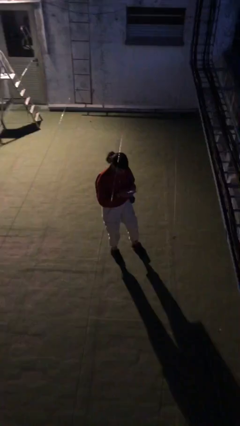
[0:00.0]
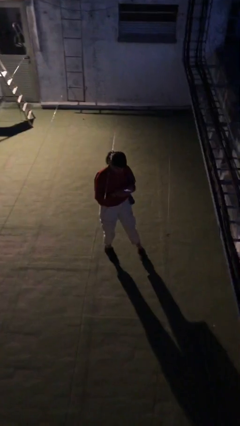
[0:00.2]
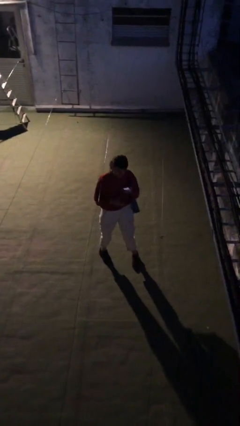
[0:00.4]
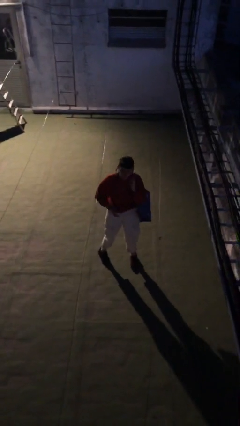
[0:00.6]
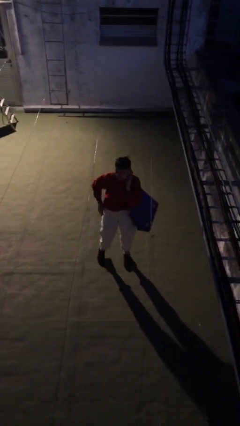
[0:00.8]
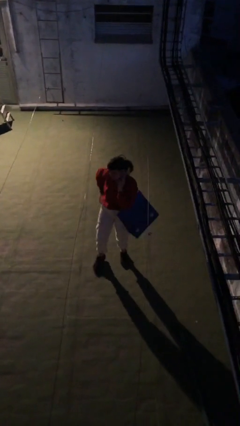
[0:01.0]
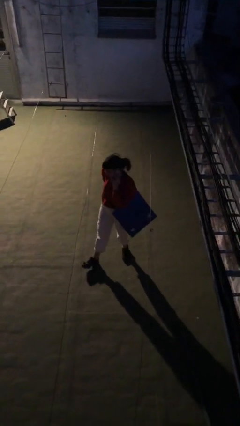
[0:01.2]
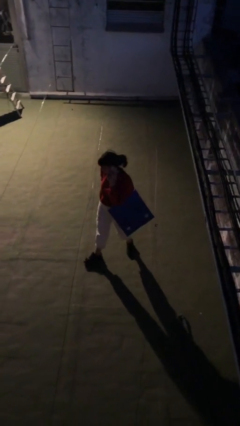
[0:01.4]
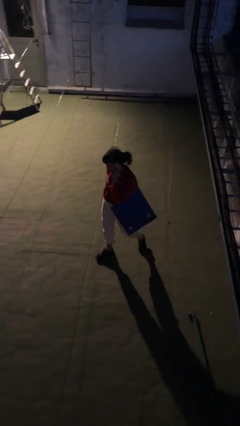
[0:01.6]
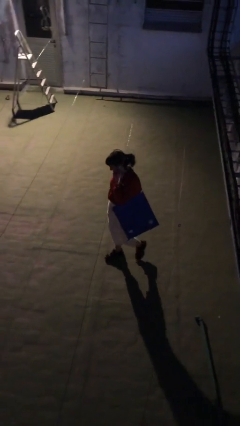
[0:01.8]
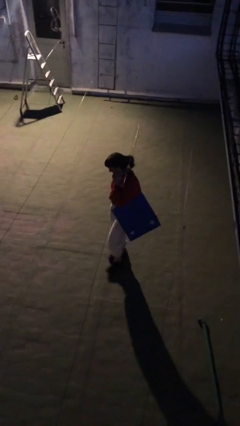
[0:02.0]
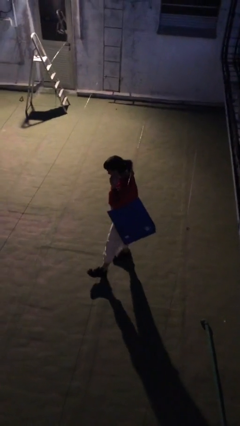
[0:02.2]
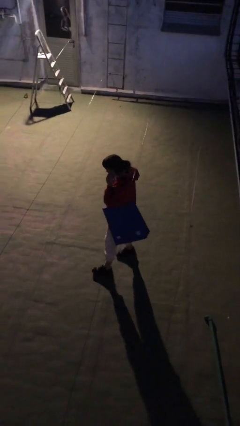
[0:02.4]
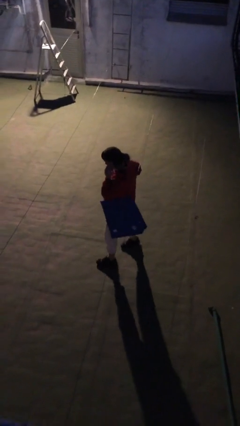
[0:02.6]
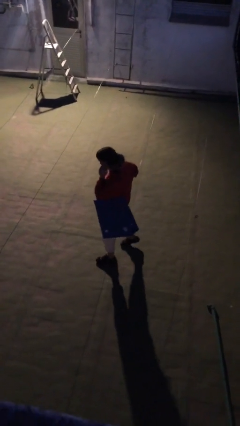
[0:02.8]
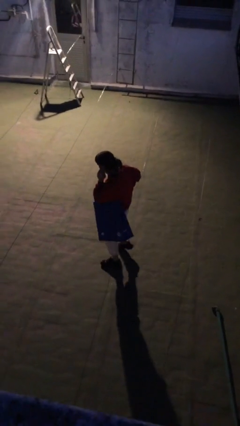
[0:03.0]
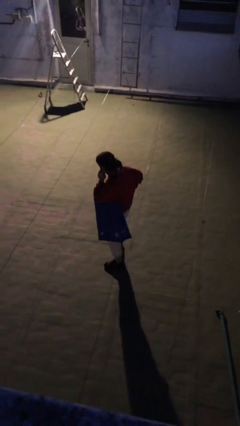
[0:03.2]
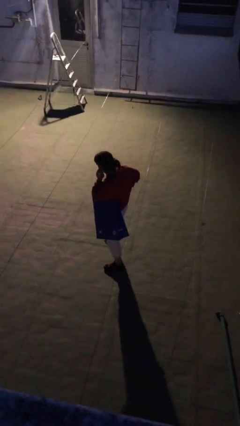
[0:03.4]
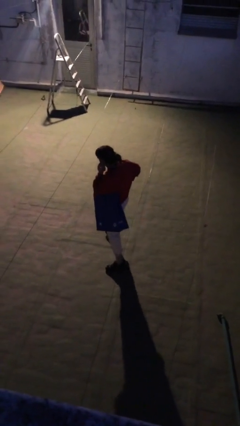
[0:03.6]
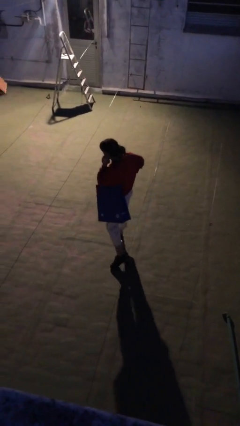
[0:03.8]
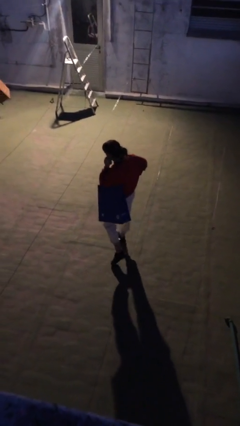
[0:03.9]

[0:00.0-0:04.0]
person talks on phone

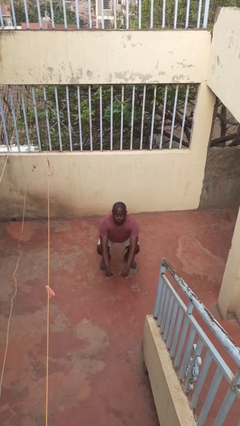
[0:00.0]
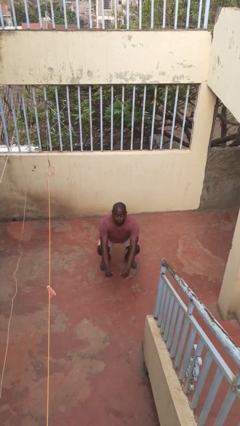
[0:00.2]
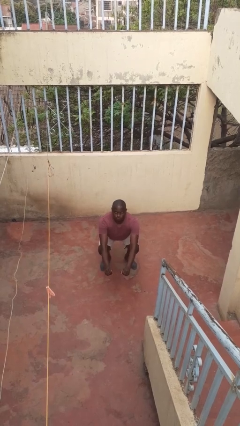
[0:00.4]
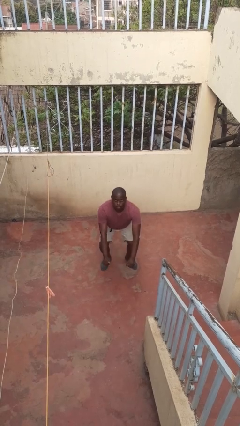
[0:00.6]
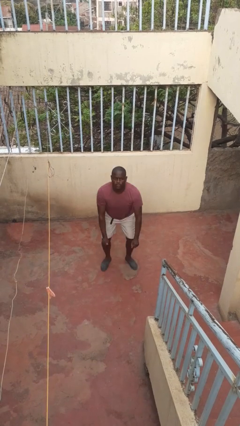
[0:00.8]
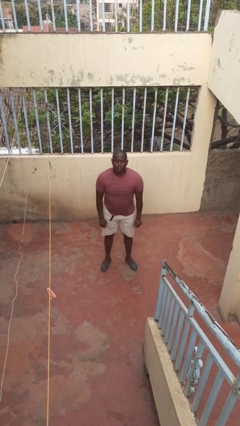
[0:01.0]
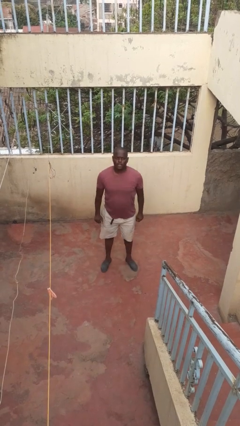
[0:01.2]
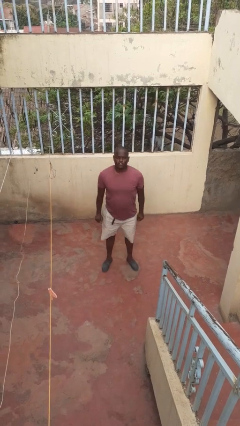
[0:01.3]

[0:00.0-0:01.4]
person stands up

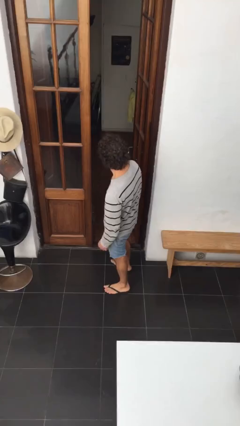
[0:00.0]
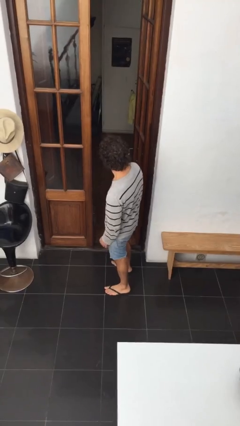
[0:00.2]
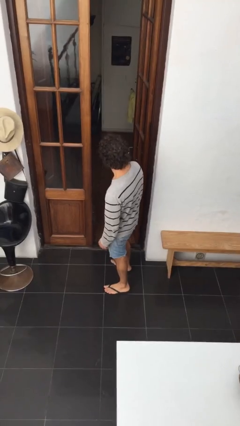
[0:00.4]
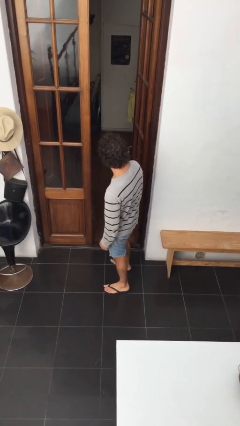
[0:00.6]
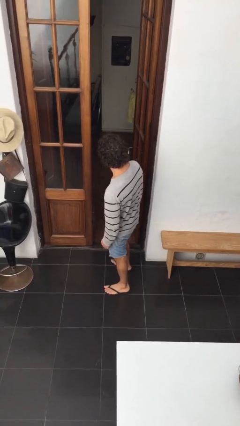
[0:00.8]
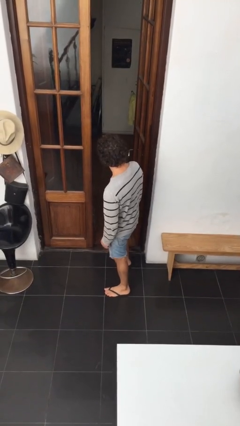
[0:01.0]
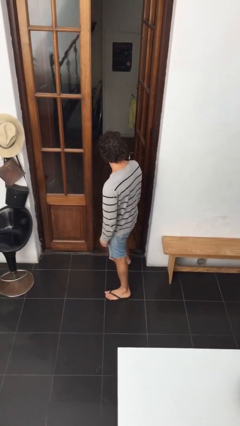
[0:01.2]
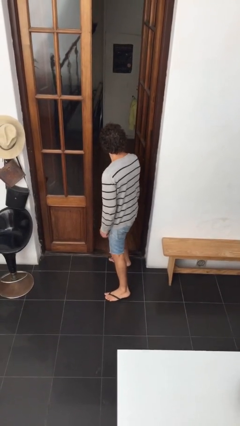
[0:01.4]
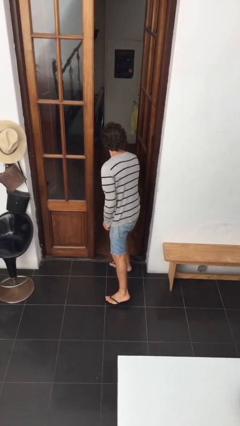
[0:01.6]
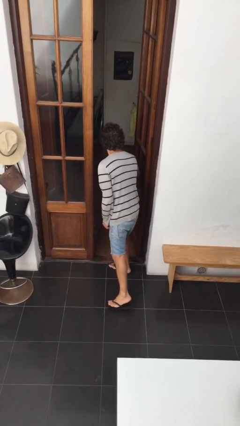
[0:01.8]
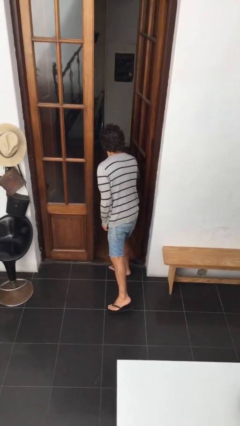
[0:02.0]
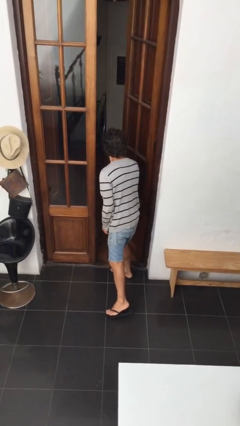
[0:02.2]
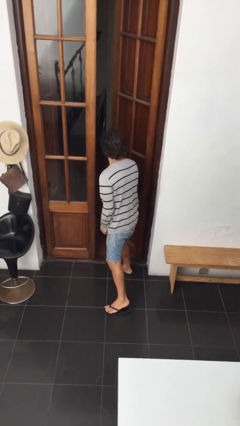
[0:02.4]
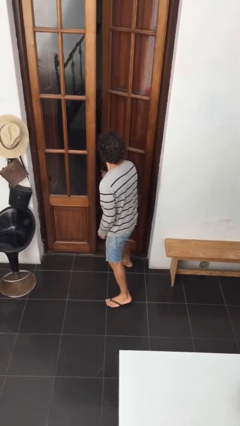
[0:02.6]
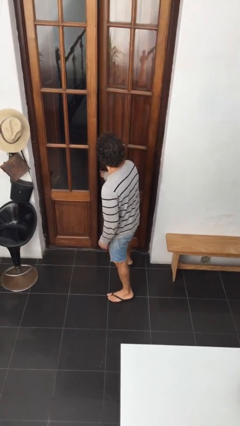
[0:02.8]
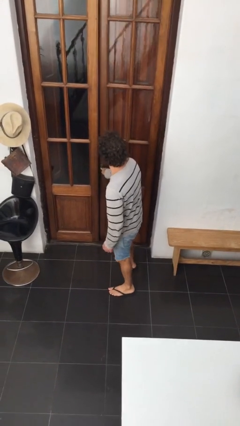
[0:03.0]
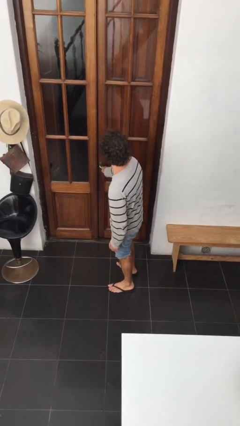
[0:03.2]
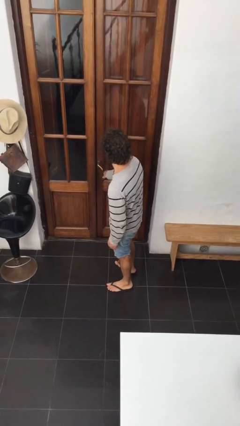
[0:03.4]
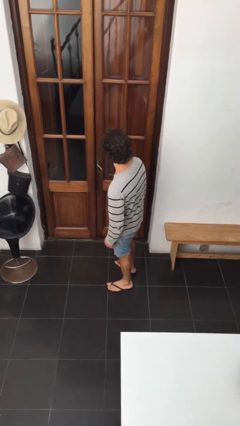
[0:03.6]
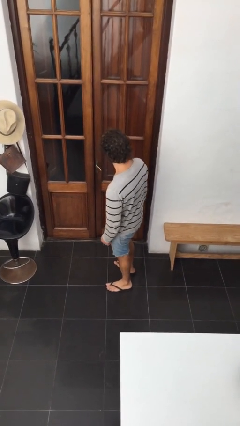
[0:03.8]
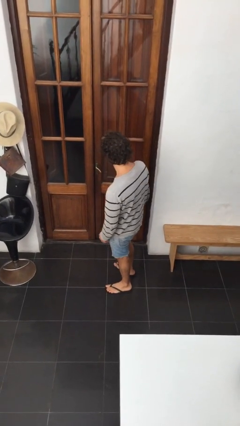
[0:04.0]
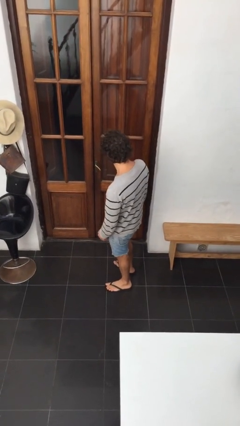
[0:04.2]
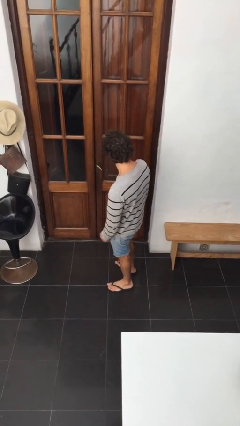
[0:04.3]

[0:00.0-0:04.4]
person closes facility door

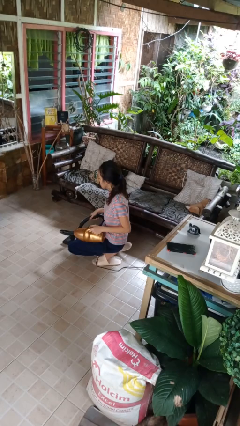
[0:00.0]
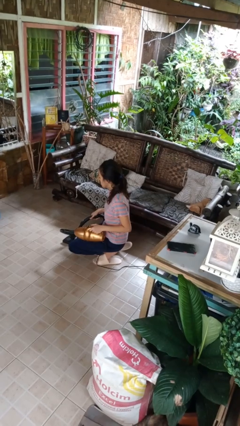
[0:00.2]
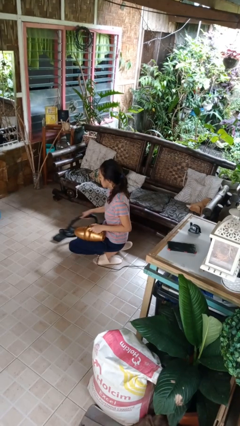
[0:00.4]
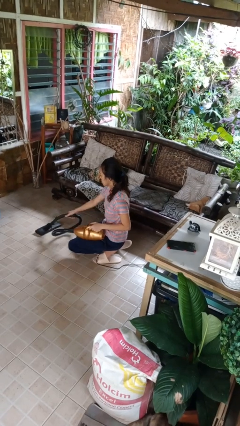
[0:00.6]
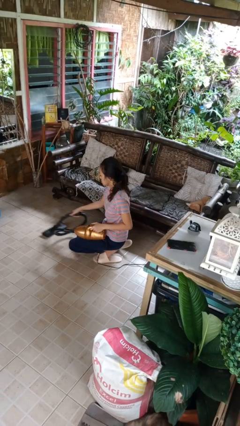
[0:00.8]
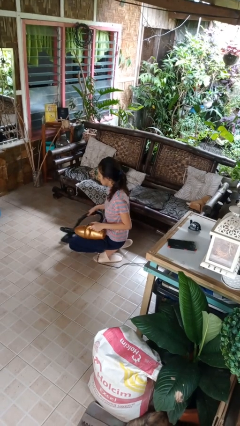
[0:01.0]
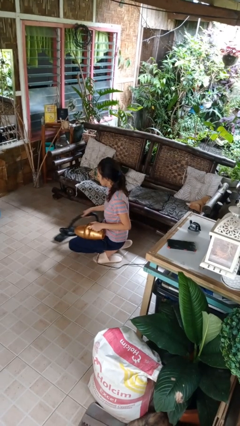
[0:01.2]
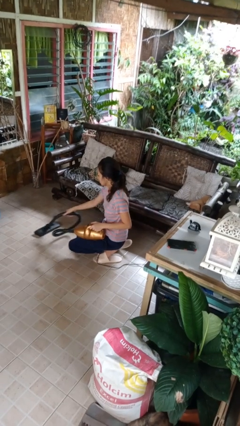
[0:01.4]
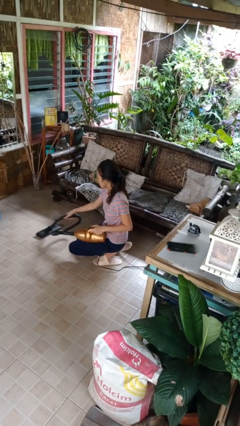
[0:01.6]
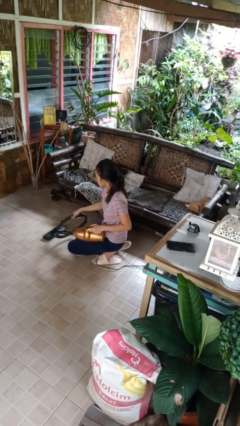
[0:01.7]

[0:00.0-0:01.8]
person vacuums carpet

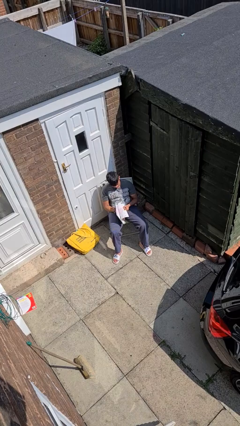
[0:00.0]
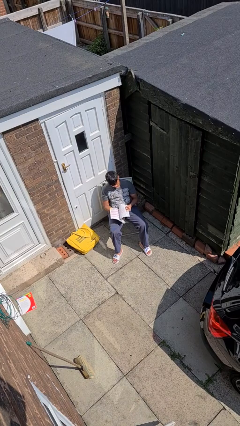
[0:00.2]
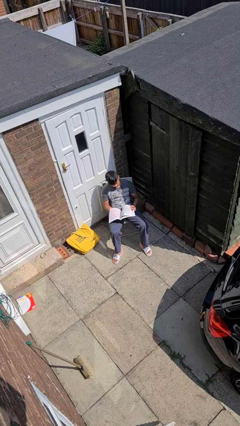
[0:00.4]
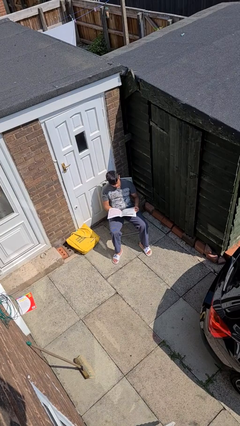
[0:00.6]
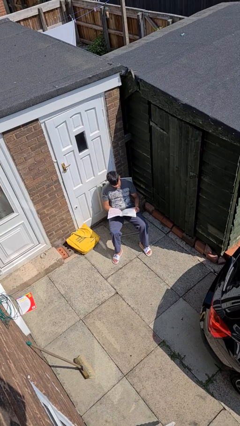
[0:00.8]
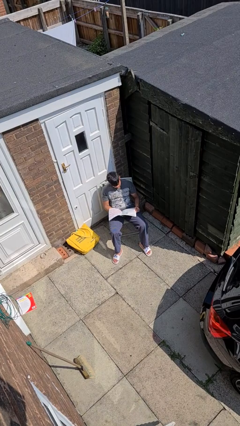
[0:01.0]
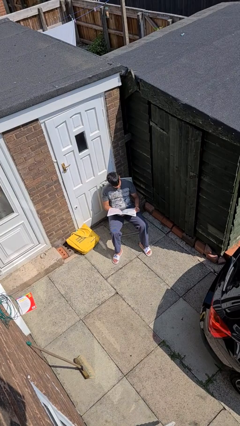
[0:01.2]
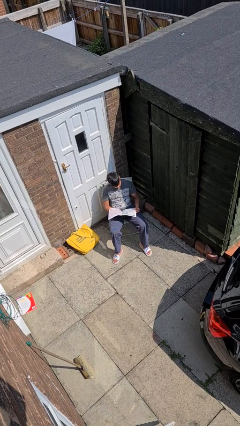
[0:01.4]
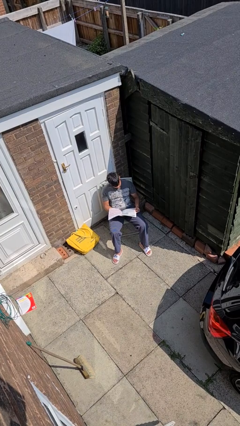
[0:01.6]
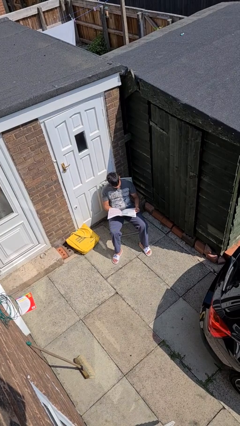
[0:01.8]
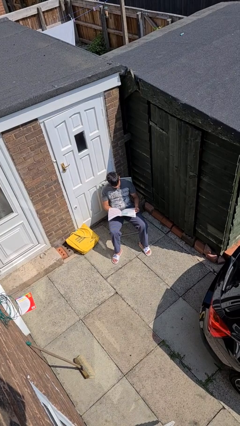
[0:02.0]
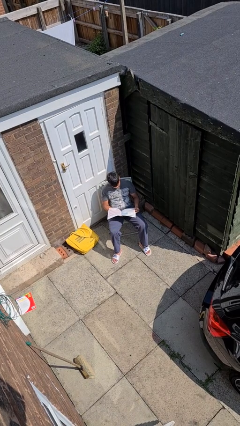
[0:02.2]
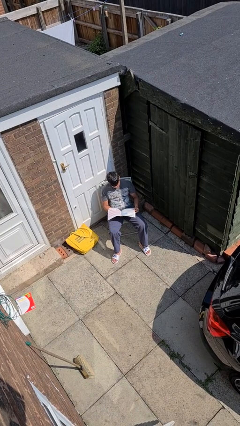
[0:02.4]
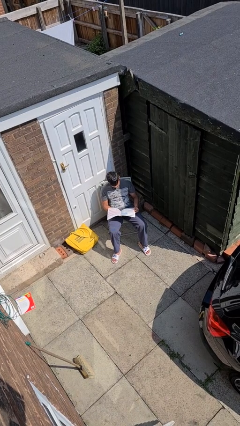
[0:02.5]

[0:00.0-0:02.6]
person reads newspaper

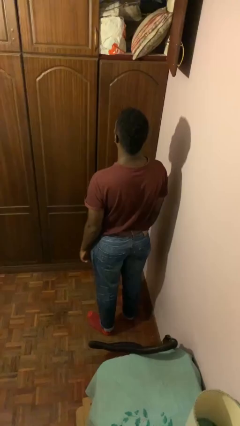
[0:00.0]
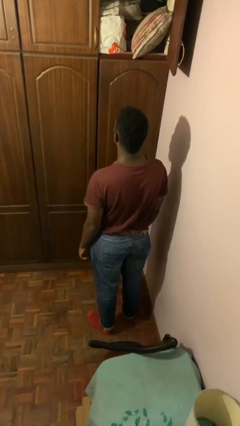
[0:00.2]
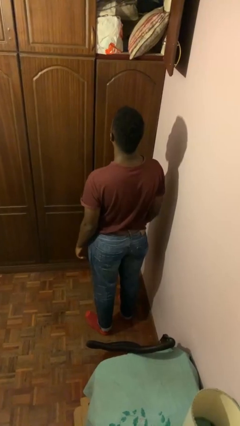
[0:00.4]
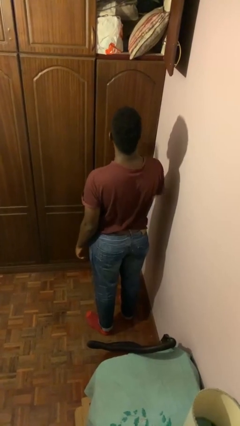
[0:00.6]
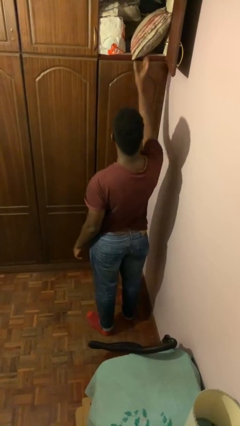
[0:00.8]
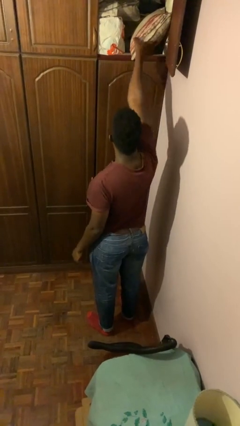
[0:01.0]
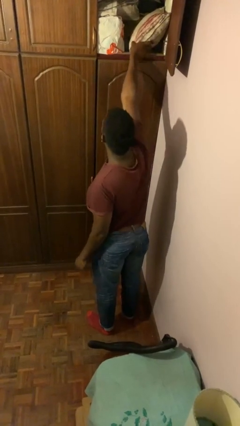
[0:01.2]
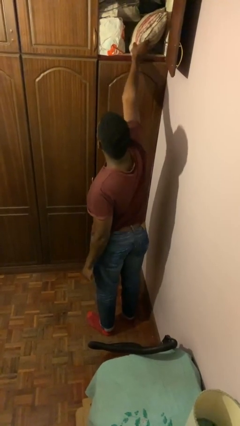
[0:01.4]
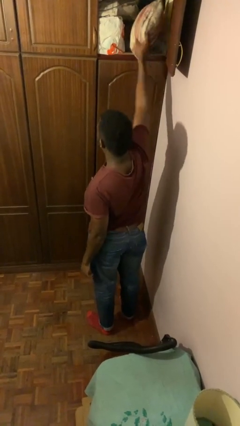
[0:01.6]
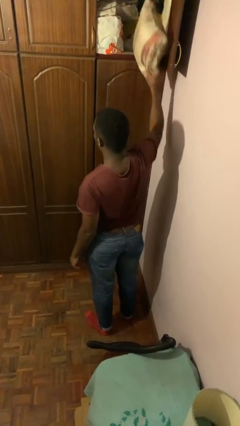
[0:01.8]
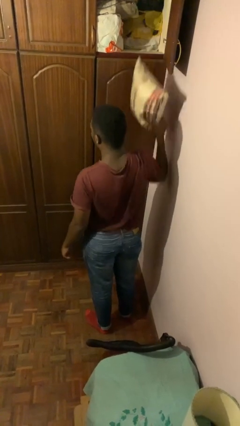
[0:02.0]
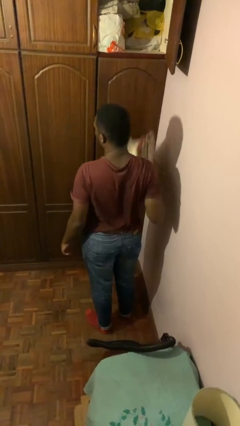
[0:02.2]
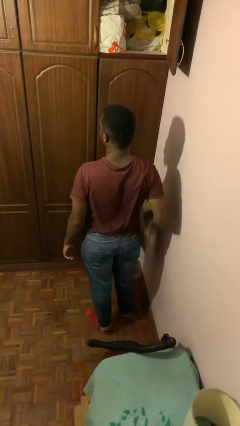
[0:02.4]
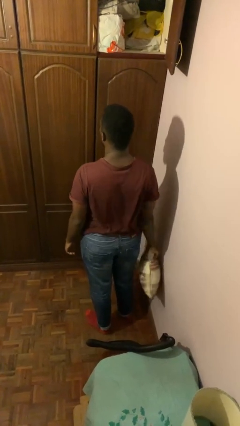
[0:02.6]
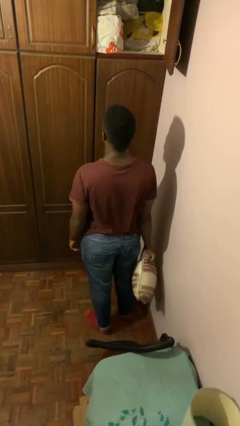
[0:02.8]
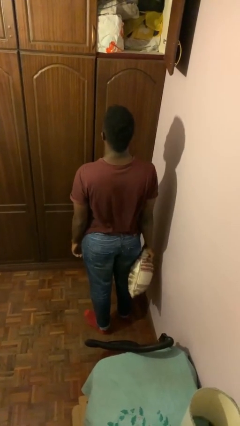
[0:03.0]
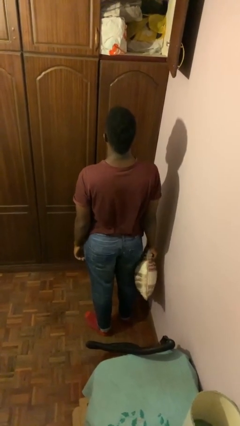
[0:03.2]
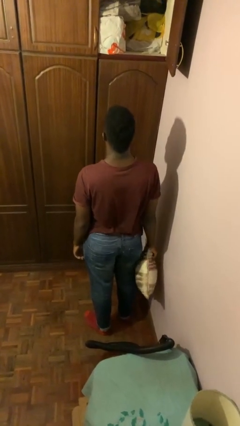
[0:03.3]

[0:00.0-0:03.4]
person picks up object from shelf
